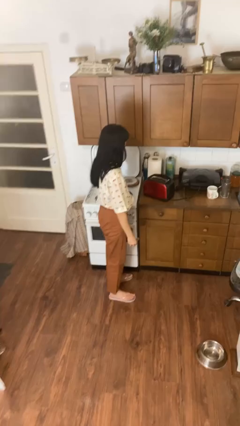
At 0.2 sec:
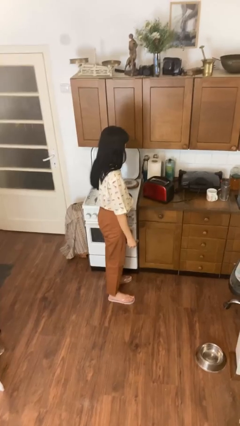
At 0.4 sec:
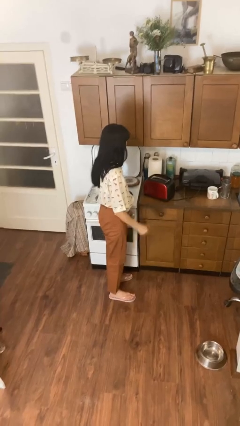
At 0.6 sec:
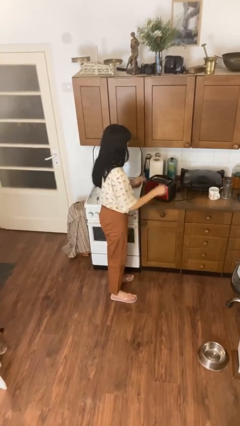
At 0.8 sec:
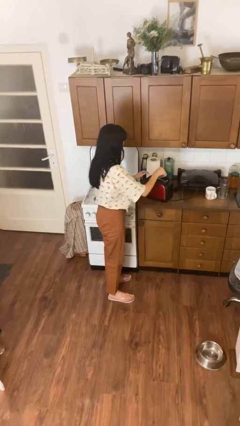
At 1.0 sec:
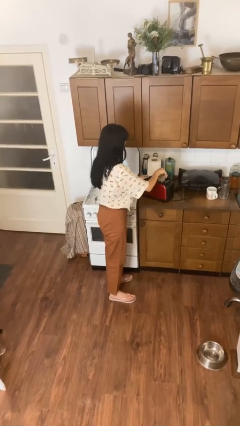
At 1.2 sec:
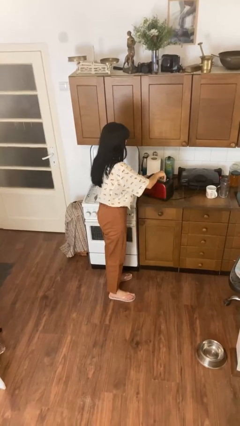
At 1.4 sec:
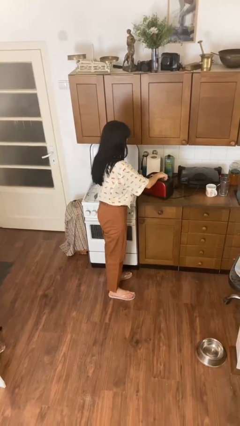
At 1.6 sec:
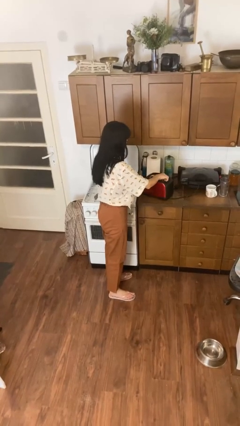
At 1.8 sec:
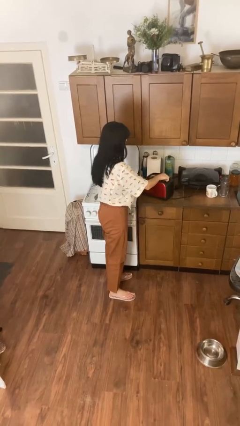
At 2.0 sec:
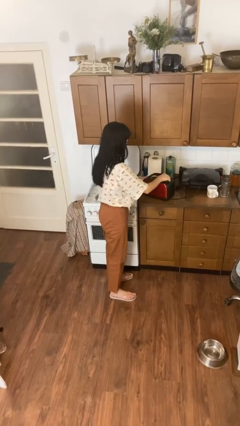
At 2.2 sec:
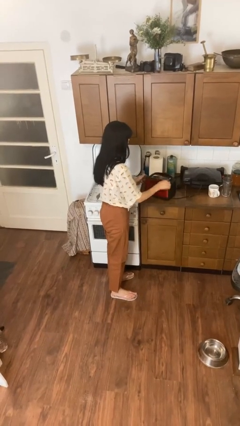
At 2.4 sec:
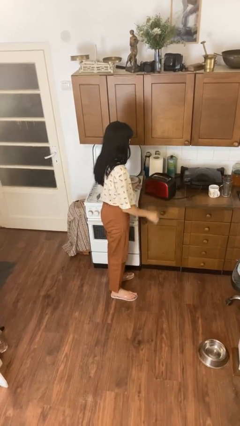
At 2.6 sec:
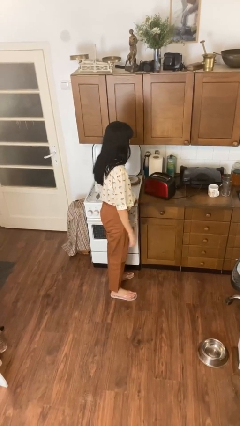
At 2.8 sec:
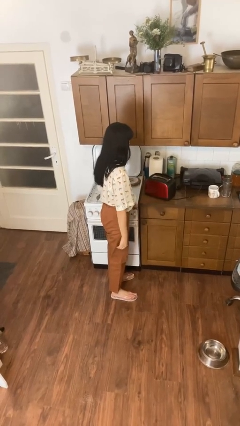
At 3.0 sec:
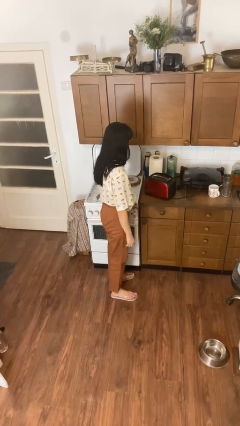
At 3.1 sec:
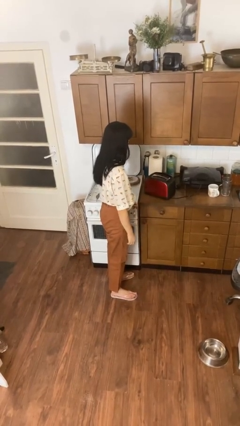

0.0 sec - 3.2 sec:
person puts object into toaster

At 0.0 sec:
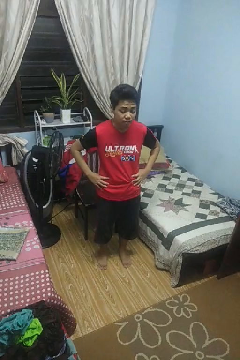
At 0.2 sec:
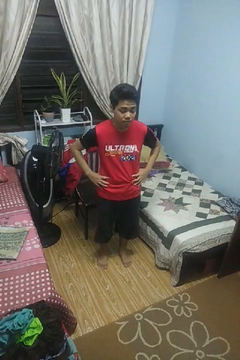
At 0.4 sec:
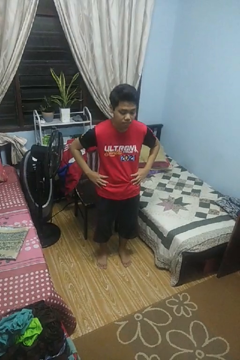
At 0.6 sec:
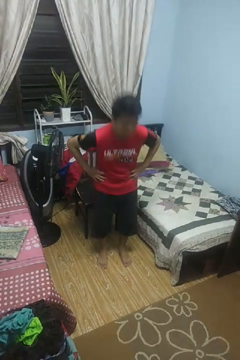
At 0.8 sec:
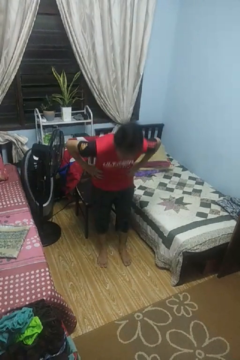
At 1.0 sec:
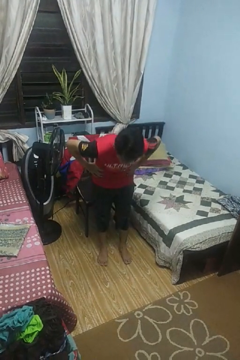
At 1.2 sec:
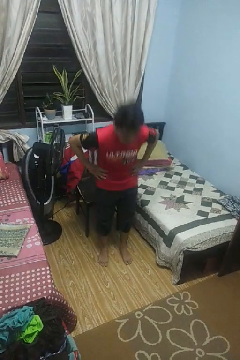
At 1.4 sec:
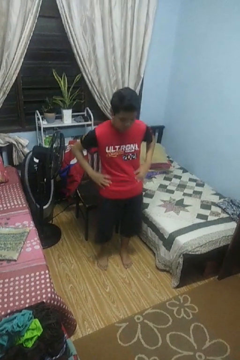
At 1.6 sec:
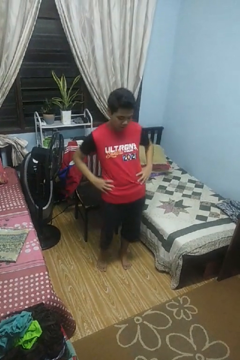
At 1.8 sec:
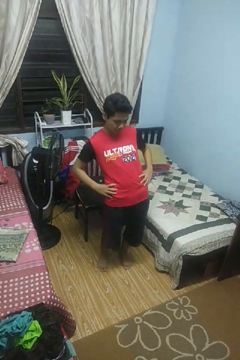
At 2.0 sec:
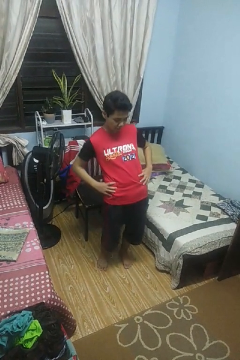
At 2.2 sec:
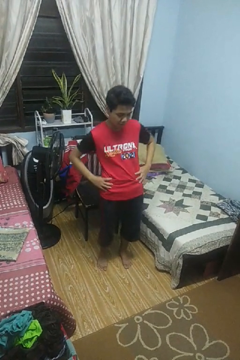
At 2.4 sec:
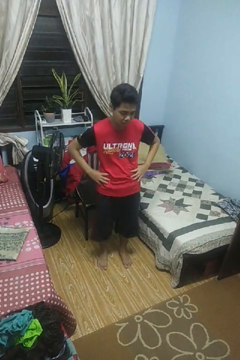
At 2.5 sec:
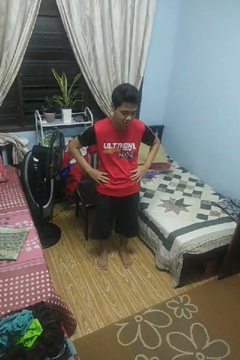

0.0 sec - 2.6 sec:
person wiggles hips

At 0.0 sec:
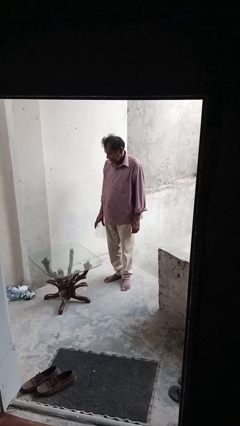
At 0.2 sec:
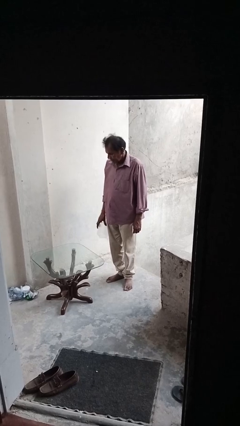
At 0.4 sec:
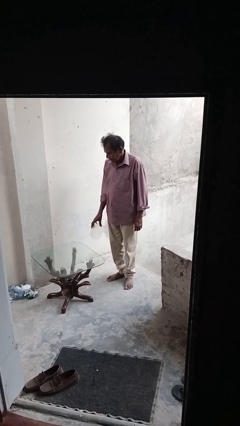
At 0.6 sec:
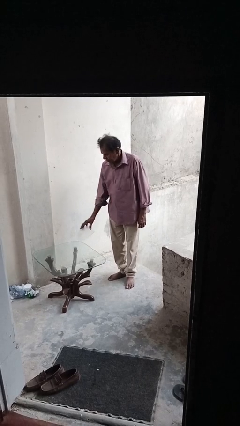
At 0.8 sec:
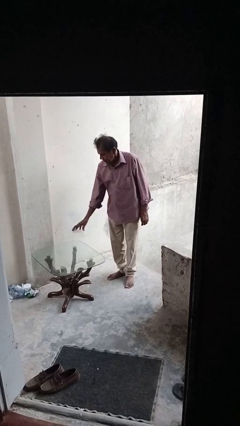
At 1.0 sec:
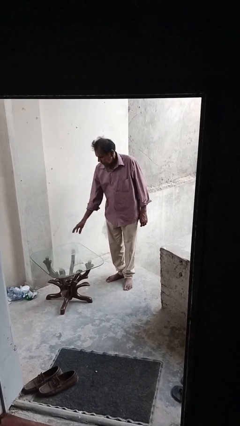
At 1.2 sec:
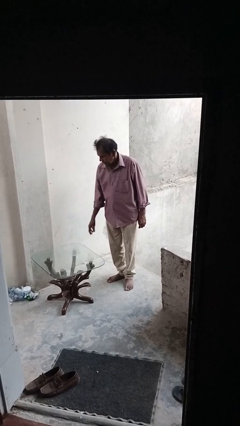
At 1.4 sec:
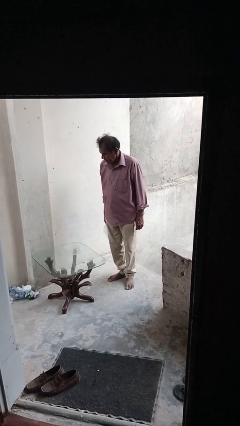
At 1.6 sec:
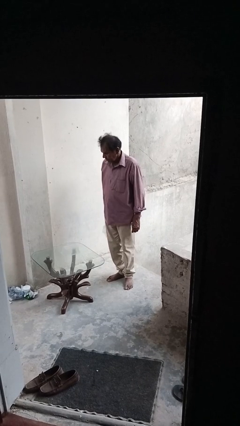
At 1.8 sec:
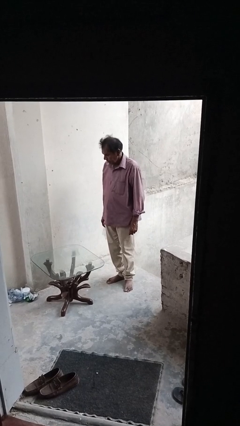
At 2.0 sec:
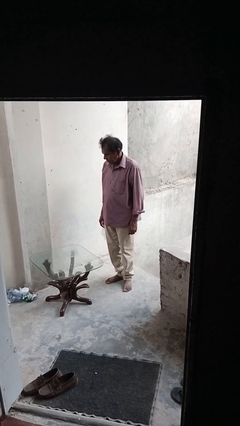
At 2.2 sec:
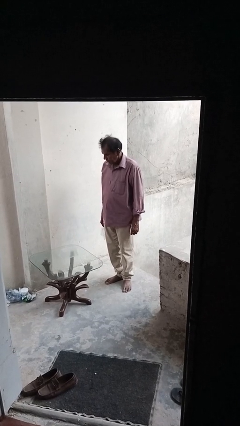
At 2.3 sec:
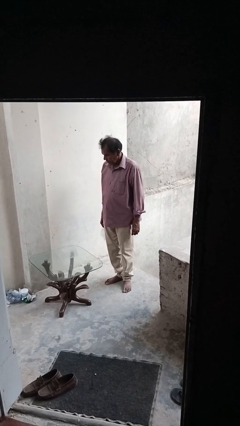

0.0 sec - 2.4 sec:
person throws object on table

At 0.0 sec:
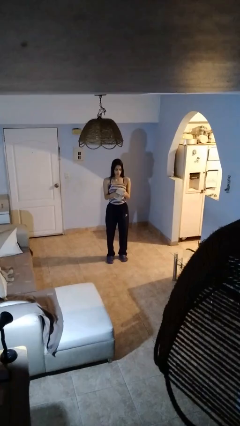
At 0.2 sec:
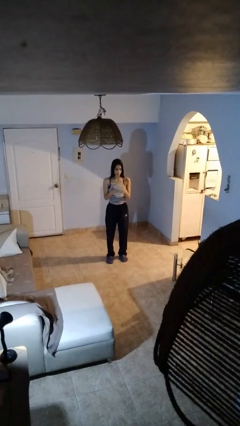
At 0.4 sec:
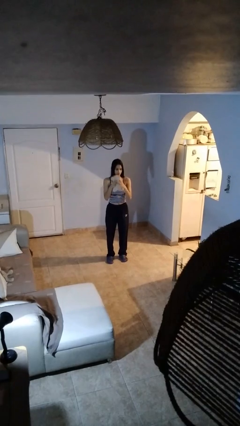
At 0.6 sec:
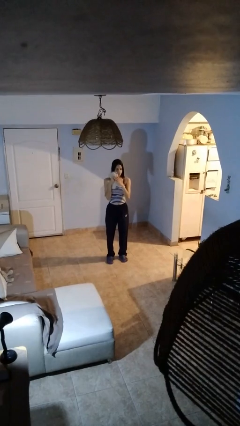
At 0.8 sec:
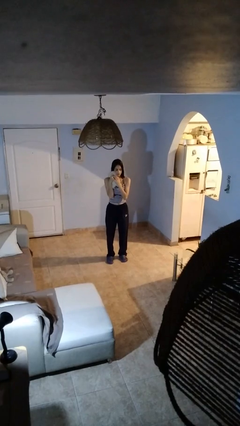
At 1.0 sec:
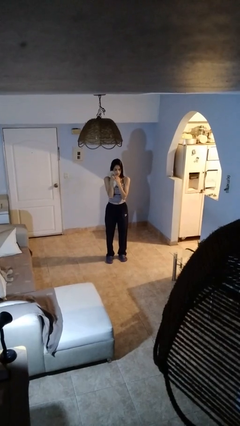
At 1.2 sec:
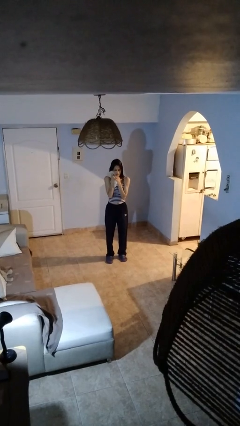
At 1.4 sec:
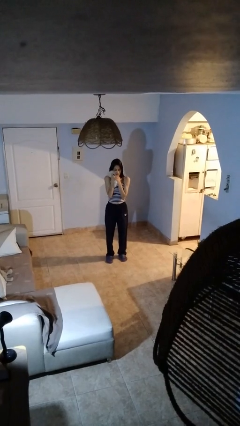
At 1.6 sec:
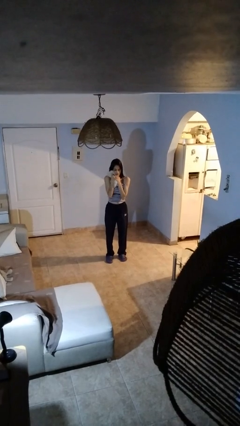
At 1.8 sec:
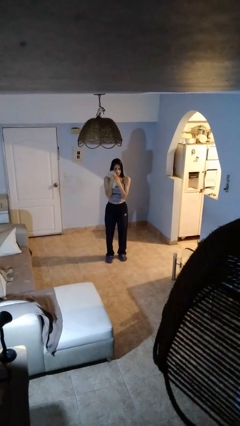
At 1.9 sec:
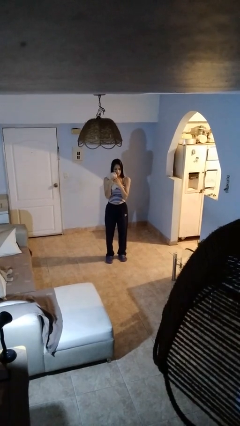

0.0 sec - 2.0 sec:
person hugs stuffed animal

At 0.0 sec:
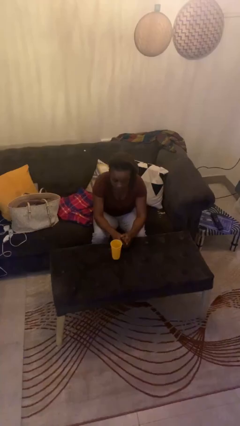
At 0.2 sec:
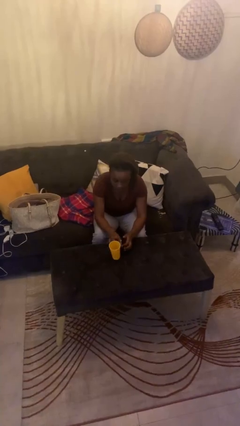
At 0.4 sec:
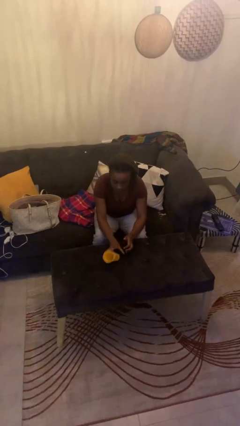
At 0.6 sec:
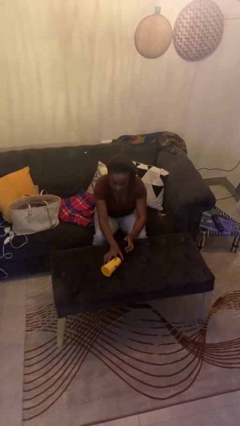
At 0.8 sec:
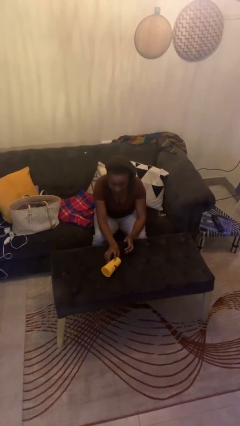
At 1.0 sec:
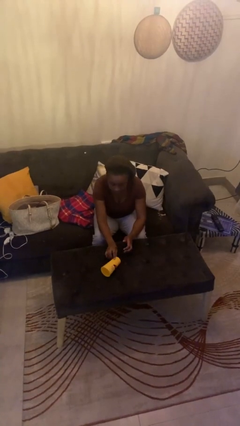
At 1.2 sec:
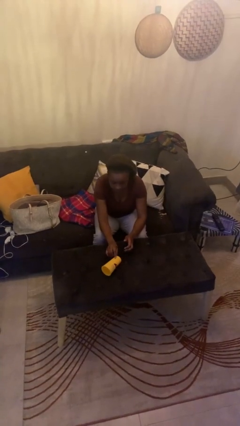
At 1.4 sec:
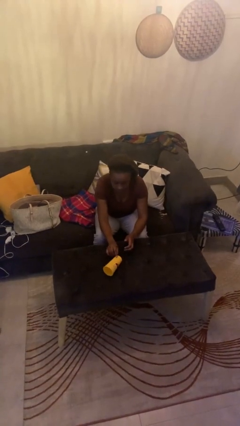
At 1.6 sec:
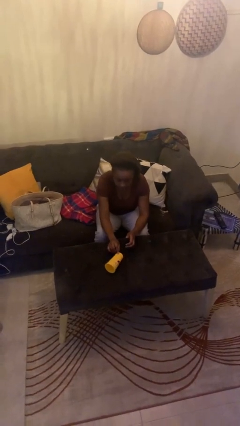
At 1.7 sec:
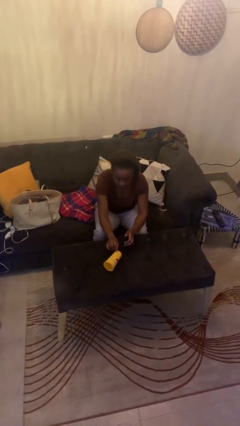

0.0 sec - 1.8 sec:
person knocks over glass

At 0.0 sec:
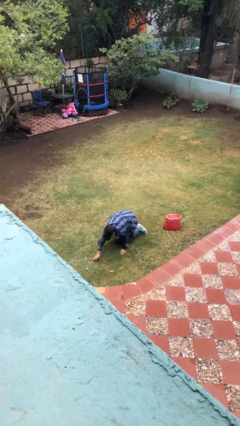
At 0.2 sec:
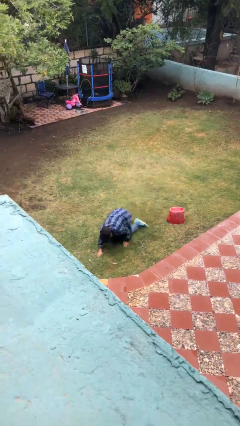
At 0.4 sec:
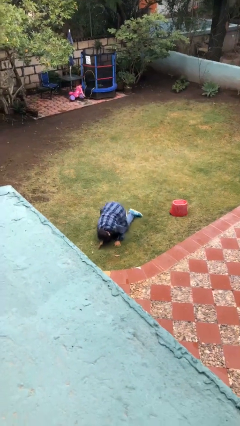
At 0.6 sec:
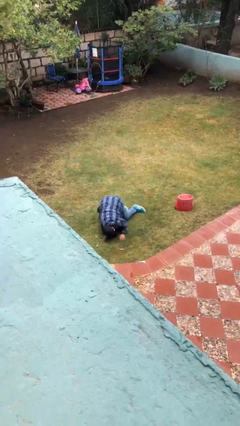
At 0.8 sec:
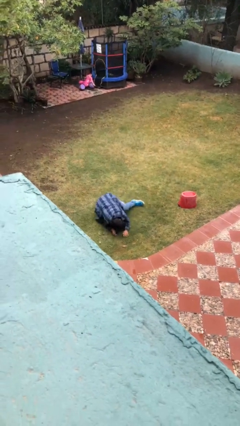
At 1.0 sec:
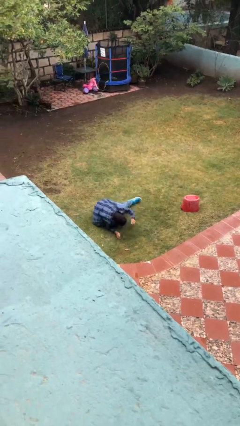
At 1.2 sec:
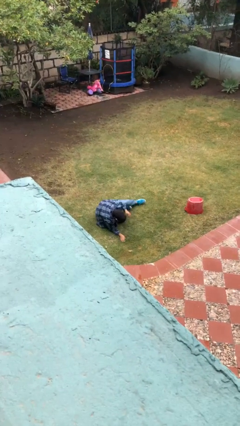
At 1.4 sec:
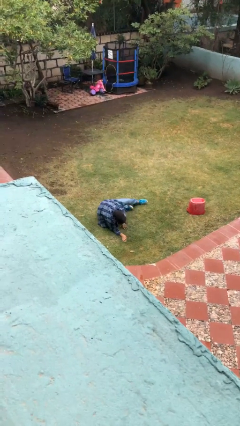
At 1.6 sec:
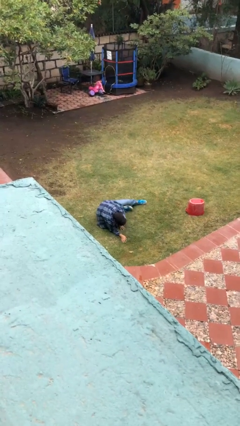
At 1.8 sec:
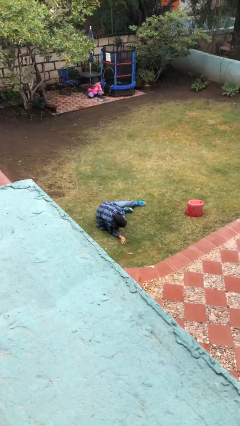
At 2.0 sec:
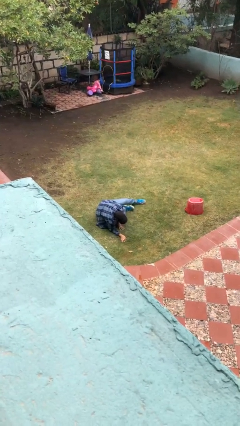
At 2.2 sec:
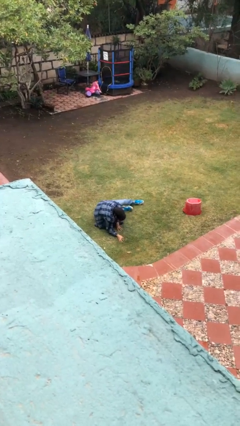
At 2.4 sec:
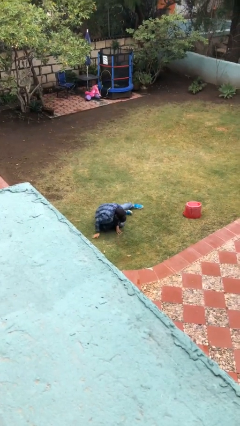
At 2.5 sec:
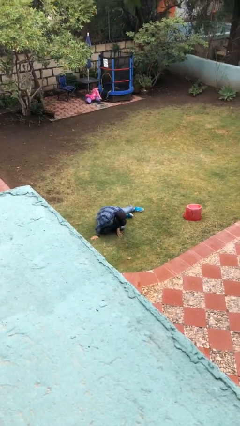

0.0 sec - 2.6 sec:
person lies down on floor

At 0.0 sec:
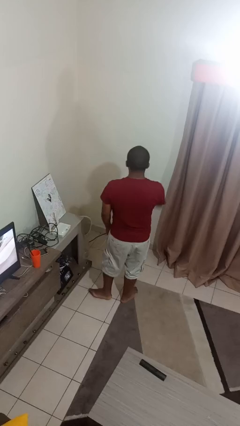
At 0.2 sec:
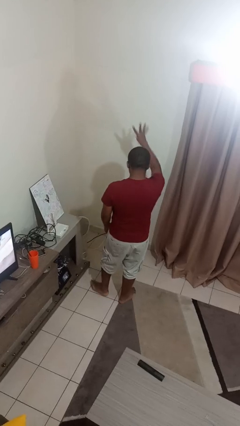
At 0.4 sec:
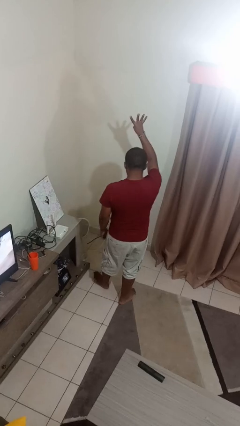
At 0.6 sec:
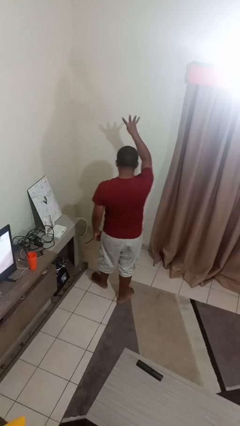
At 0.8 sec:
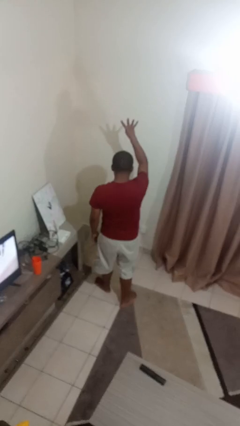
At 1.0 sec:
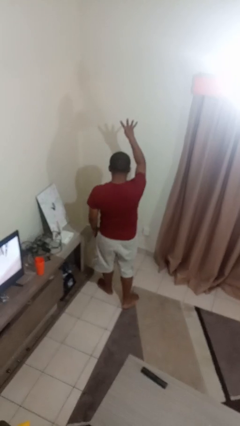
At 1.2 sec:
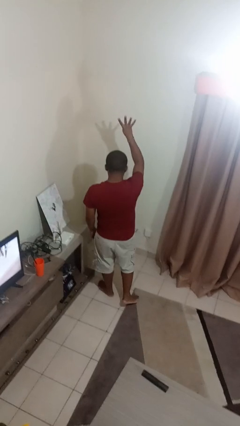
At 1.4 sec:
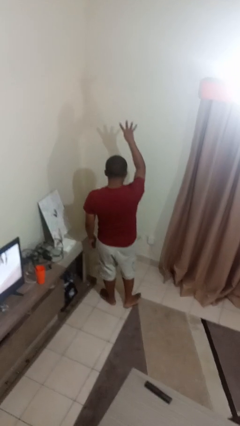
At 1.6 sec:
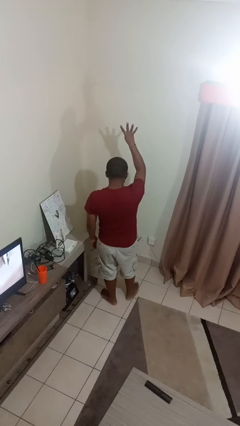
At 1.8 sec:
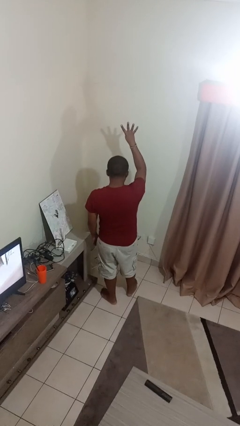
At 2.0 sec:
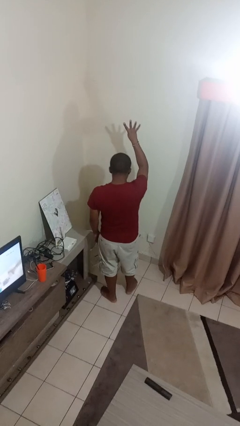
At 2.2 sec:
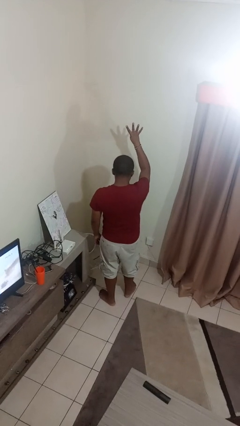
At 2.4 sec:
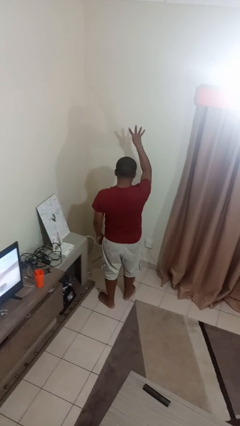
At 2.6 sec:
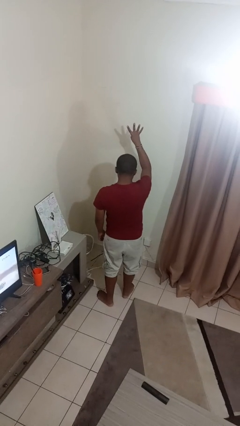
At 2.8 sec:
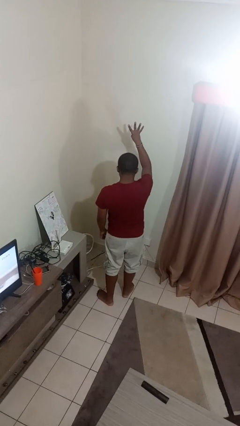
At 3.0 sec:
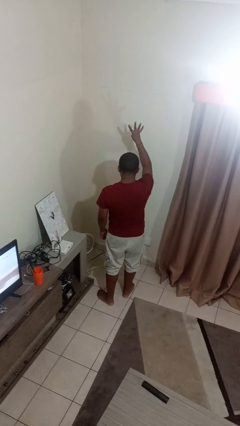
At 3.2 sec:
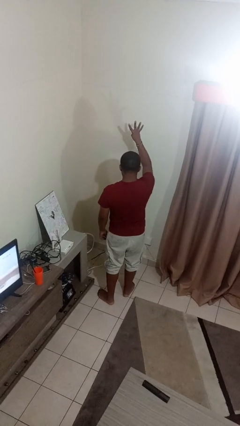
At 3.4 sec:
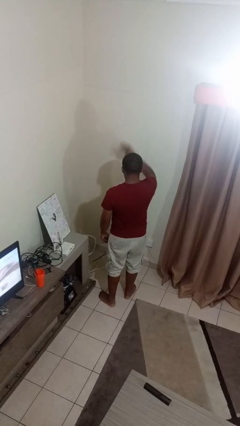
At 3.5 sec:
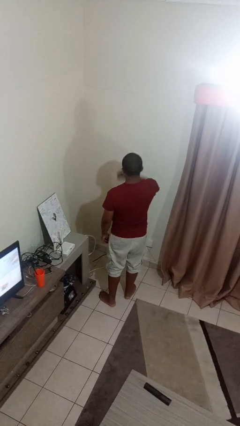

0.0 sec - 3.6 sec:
person gestures number four
